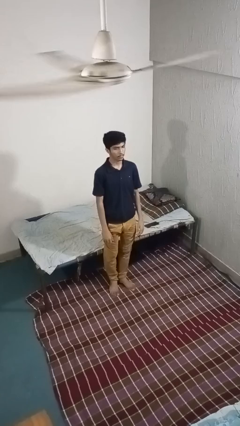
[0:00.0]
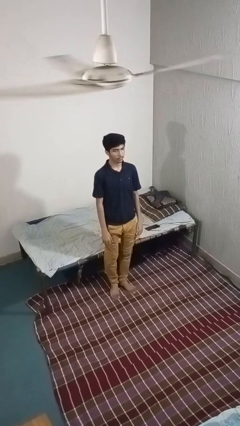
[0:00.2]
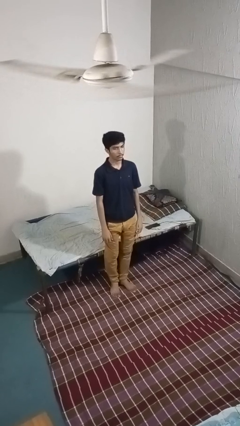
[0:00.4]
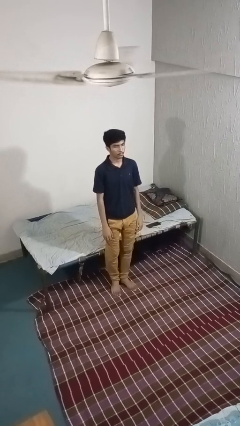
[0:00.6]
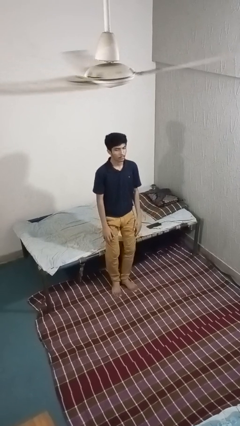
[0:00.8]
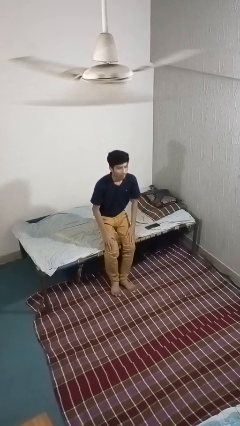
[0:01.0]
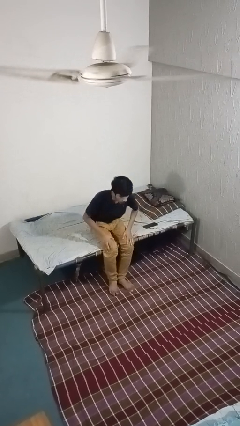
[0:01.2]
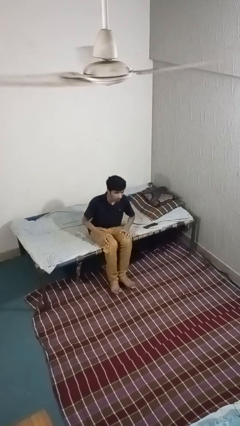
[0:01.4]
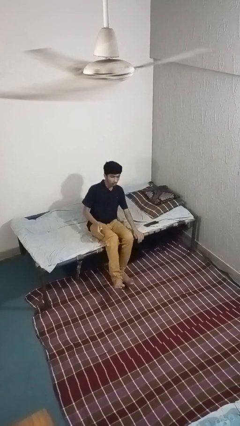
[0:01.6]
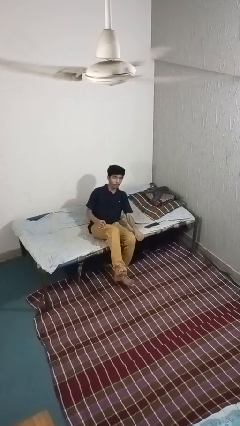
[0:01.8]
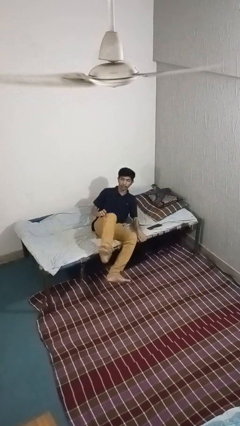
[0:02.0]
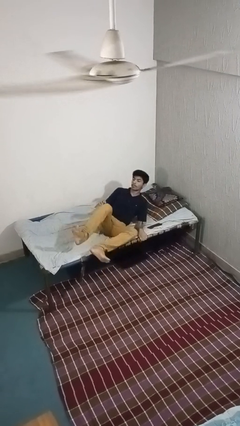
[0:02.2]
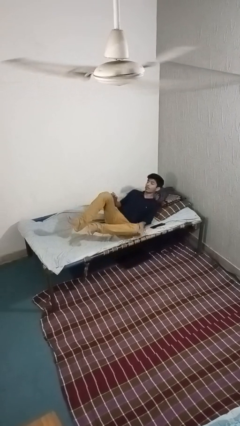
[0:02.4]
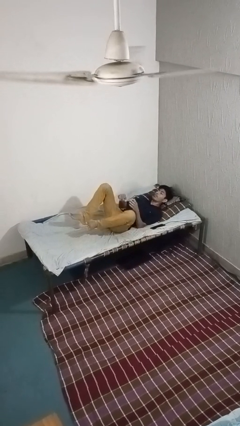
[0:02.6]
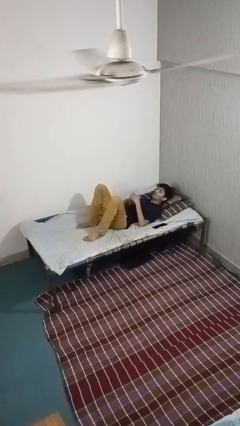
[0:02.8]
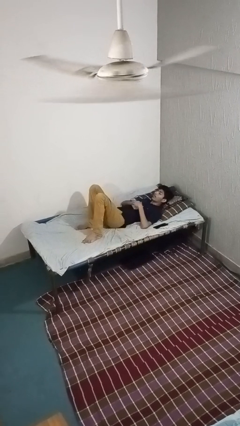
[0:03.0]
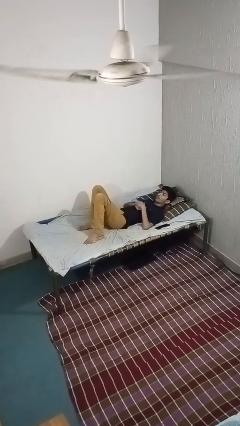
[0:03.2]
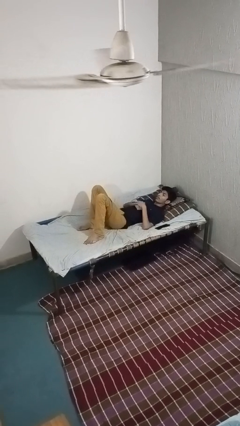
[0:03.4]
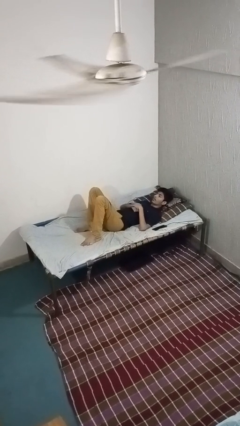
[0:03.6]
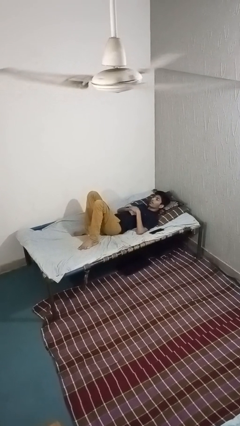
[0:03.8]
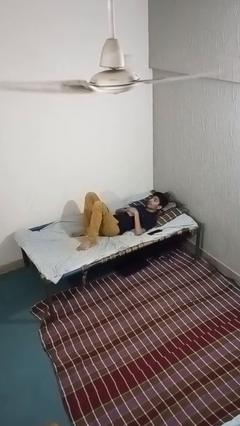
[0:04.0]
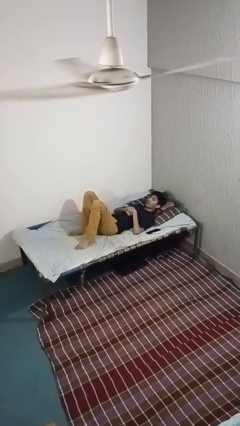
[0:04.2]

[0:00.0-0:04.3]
person lies down on bed

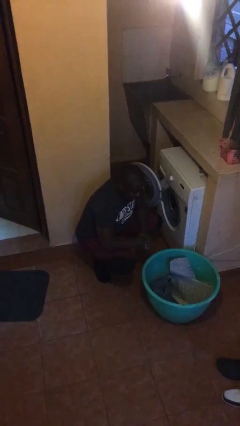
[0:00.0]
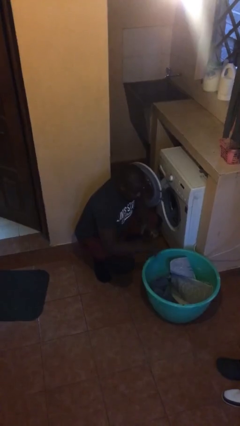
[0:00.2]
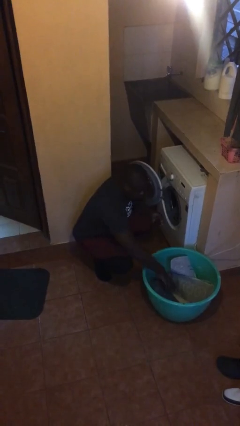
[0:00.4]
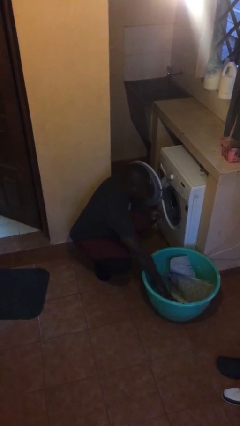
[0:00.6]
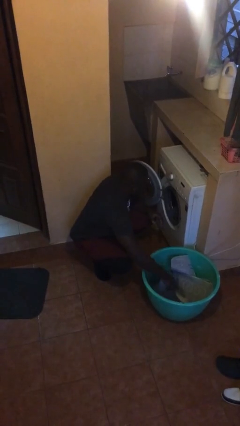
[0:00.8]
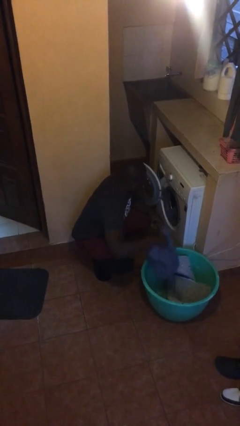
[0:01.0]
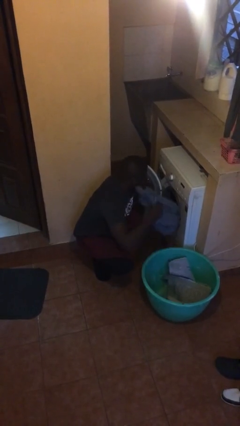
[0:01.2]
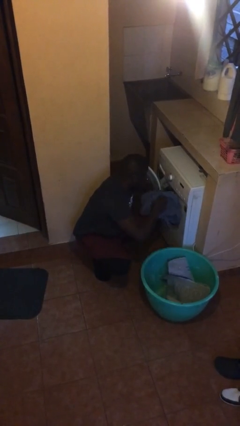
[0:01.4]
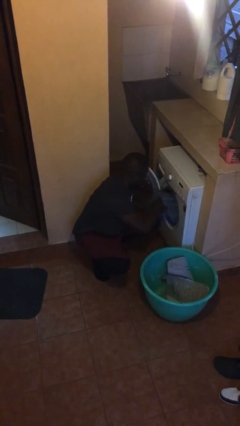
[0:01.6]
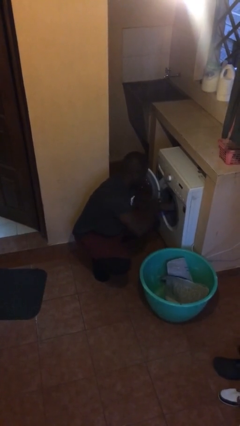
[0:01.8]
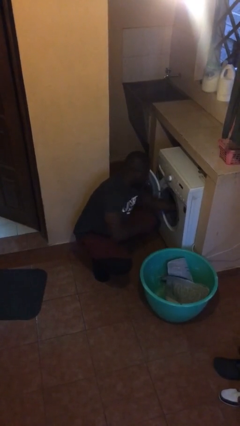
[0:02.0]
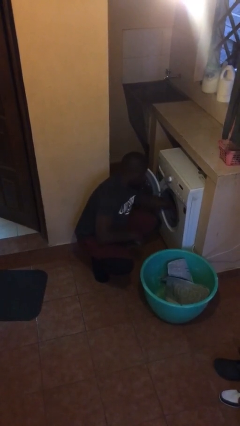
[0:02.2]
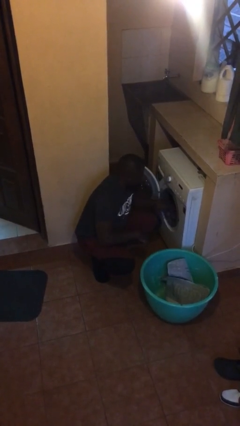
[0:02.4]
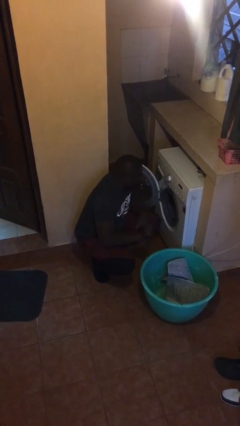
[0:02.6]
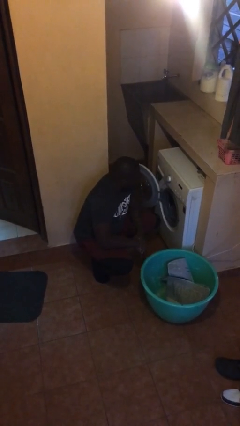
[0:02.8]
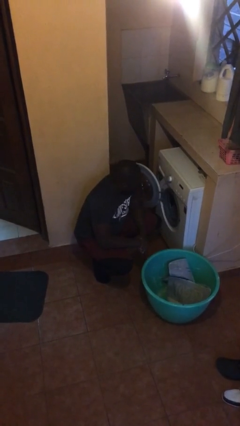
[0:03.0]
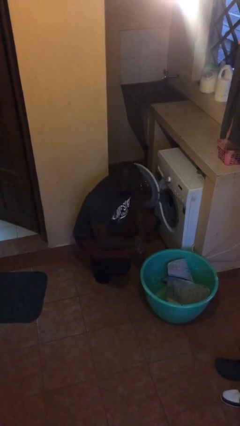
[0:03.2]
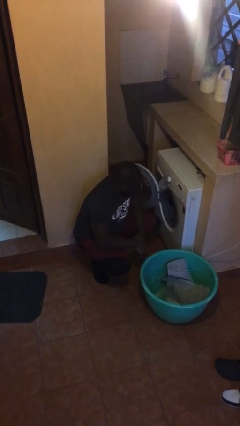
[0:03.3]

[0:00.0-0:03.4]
person loads clotheswasher

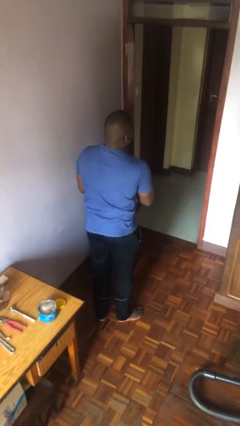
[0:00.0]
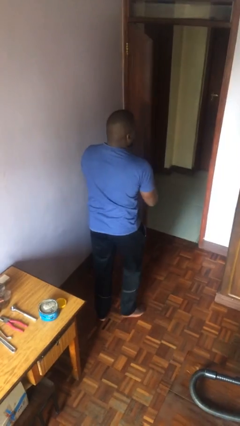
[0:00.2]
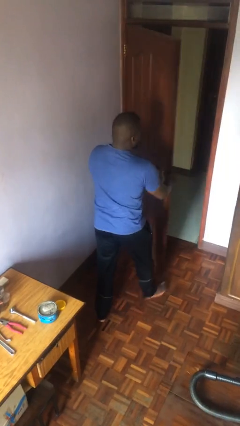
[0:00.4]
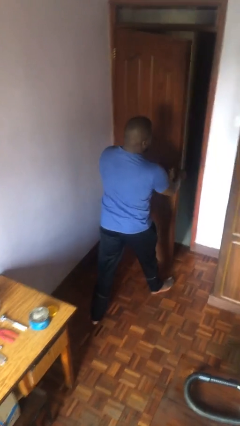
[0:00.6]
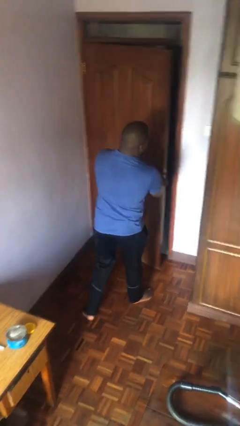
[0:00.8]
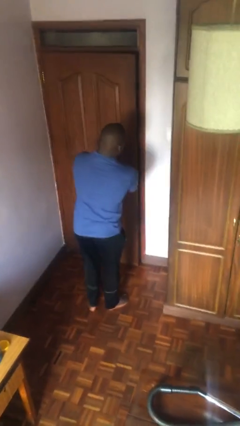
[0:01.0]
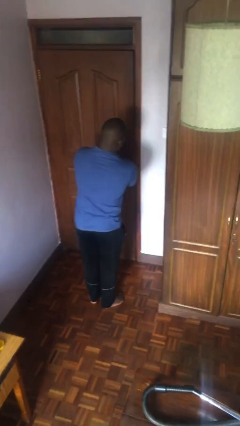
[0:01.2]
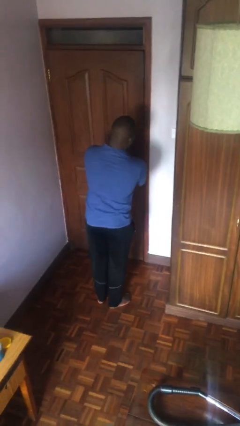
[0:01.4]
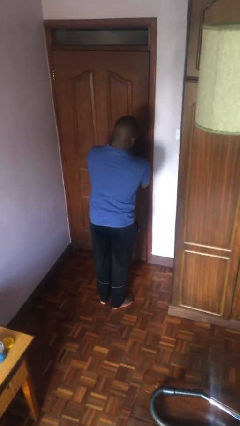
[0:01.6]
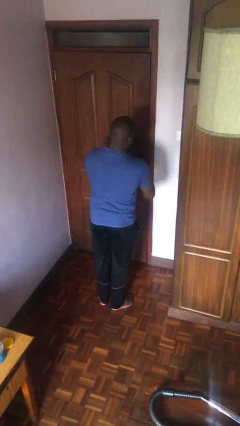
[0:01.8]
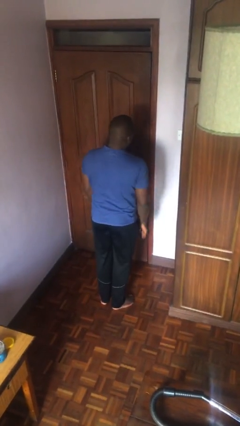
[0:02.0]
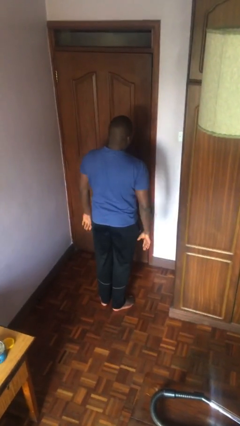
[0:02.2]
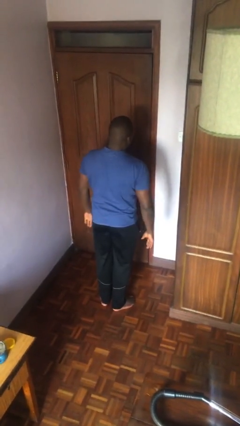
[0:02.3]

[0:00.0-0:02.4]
person closes facility door

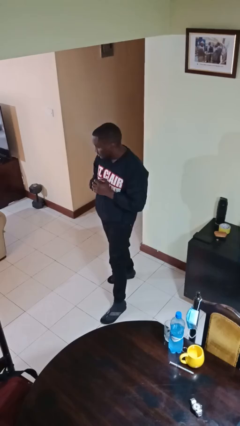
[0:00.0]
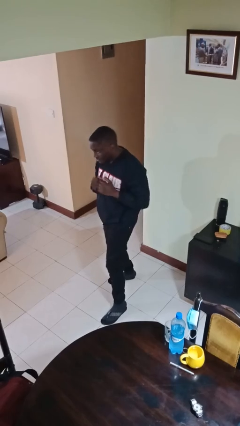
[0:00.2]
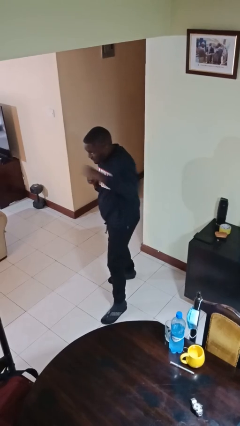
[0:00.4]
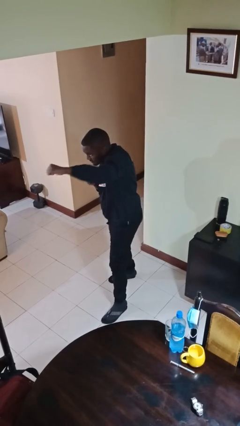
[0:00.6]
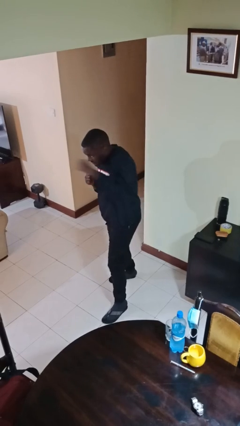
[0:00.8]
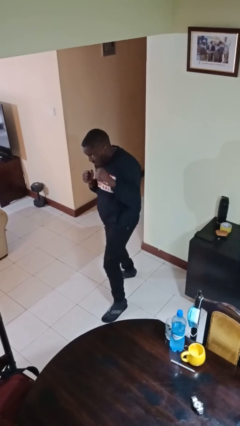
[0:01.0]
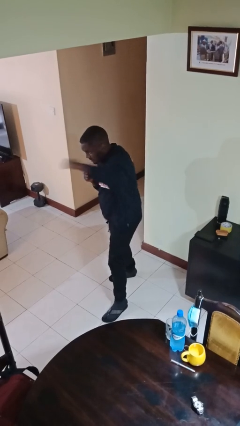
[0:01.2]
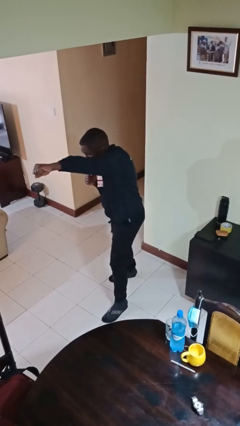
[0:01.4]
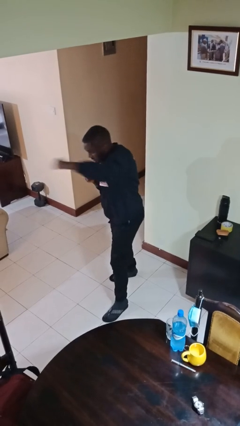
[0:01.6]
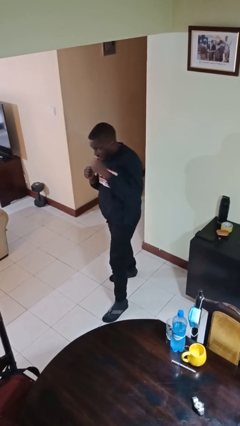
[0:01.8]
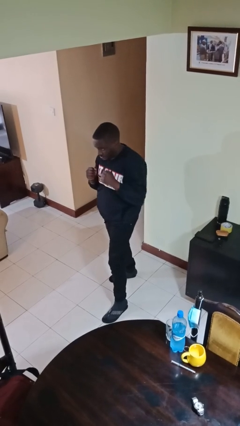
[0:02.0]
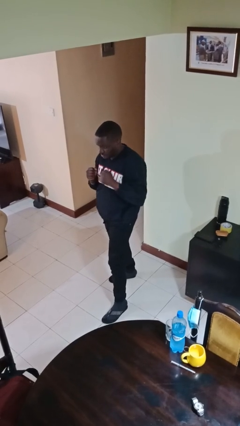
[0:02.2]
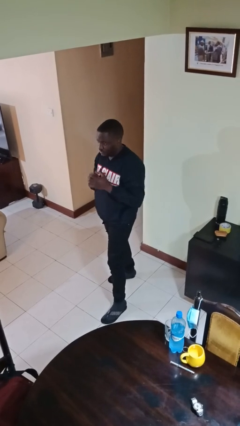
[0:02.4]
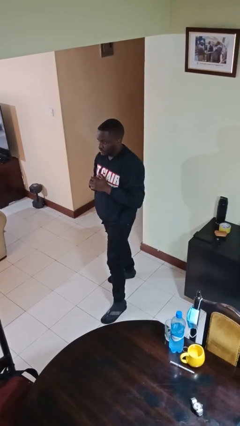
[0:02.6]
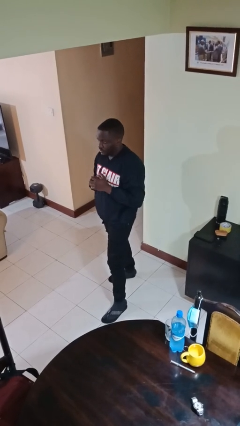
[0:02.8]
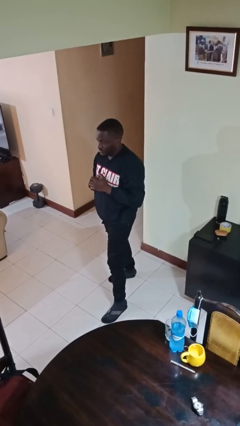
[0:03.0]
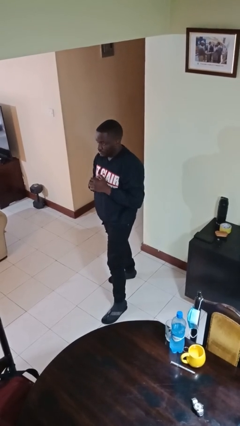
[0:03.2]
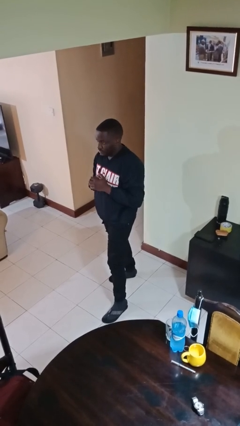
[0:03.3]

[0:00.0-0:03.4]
person punches

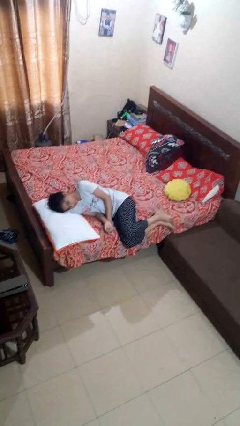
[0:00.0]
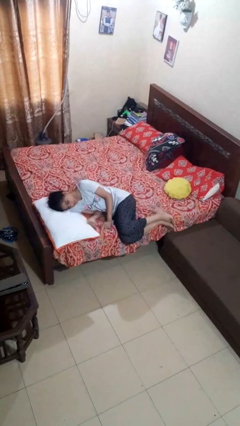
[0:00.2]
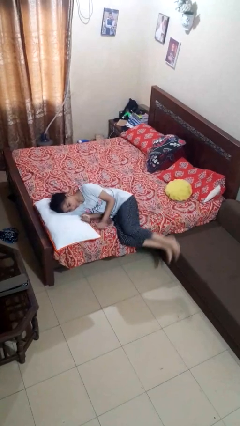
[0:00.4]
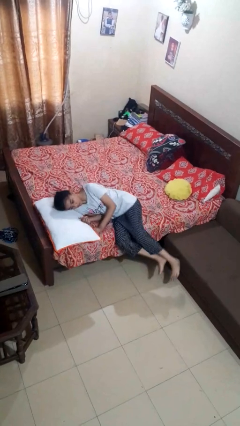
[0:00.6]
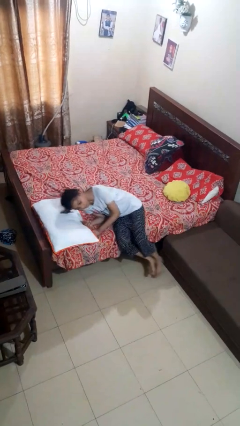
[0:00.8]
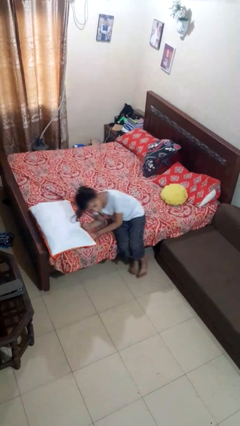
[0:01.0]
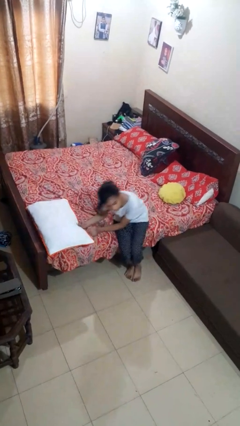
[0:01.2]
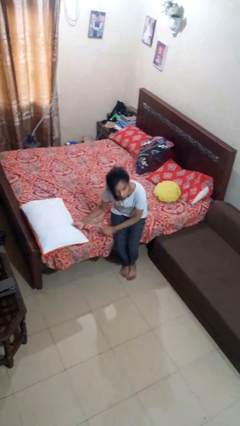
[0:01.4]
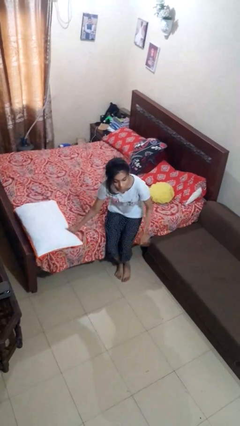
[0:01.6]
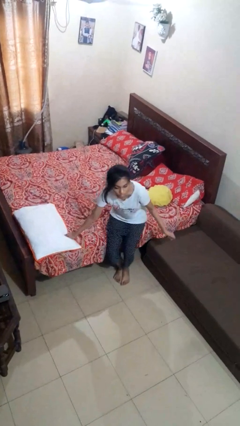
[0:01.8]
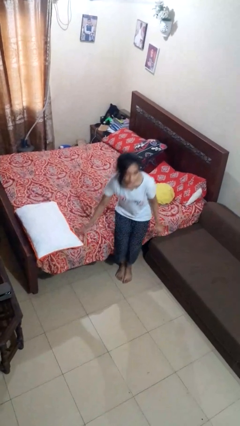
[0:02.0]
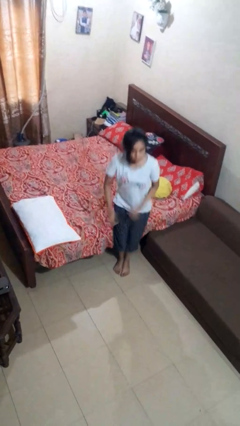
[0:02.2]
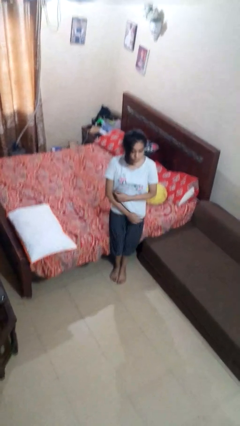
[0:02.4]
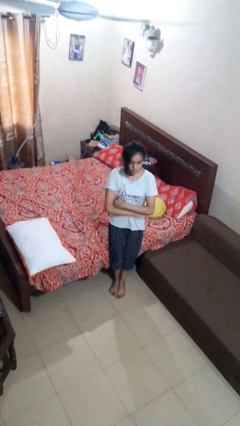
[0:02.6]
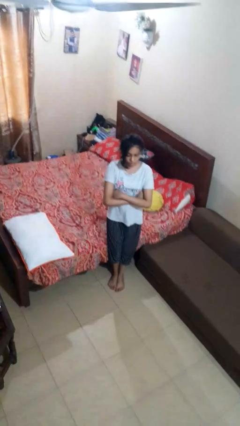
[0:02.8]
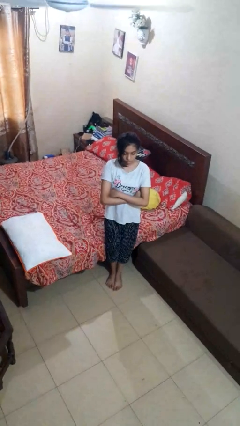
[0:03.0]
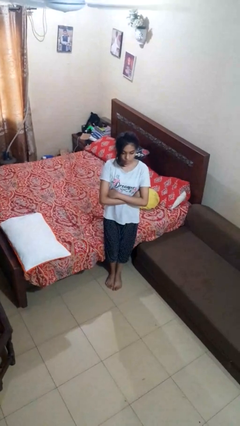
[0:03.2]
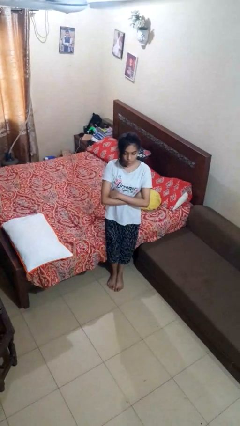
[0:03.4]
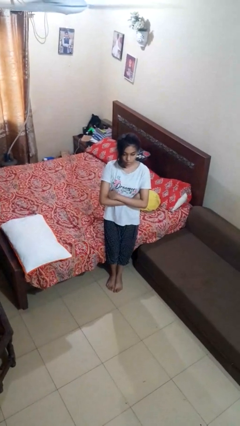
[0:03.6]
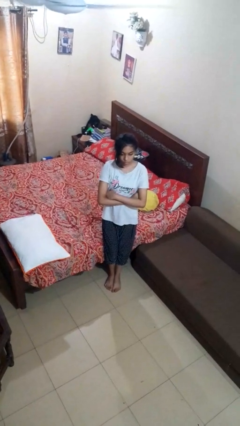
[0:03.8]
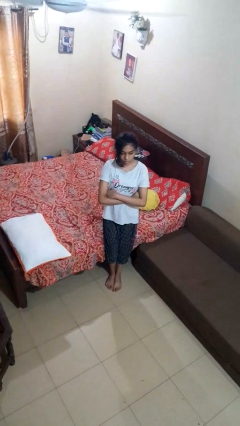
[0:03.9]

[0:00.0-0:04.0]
person stands up
